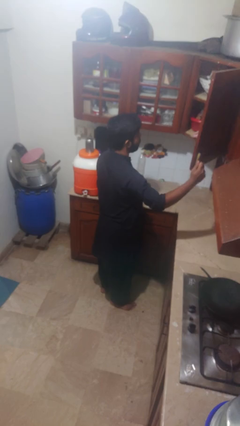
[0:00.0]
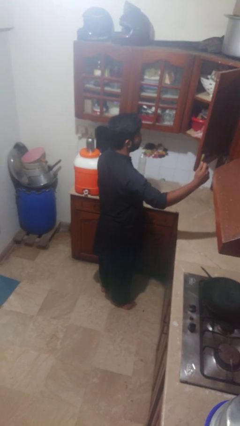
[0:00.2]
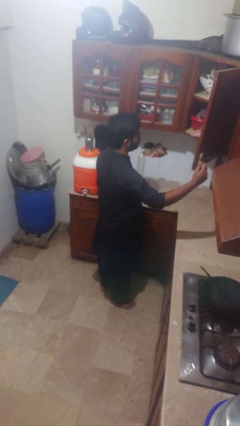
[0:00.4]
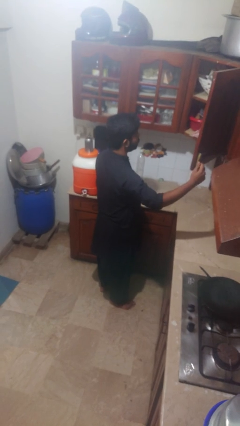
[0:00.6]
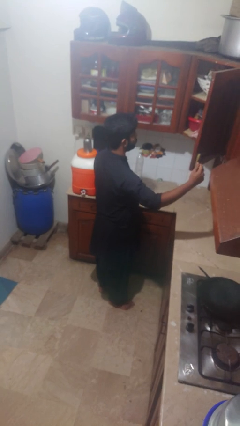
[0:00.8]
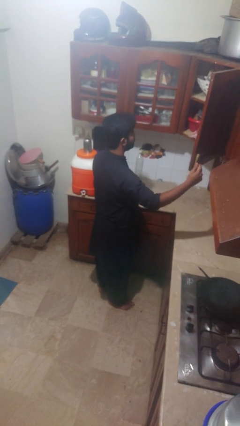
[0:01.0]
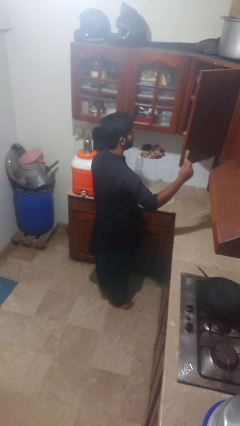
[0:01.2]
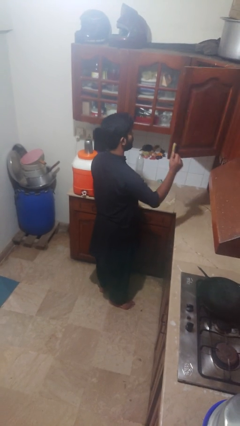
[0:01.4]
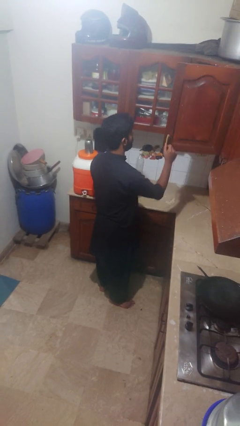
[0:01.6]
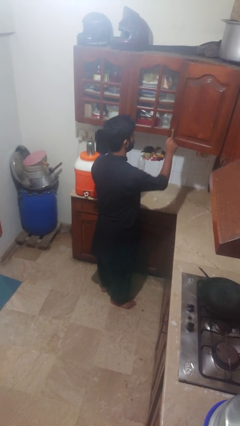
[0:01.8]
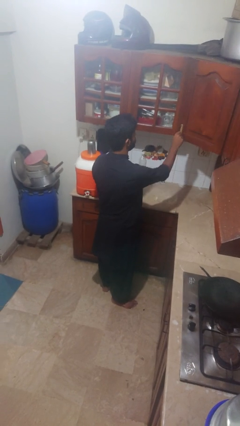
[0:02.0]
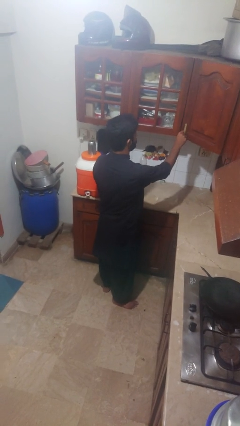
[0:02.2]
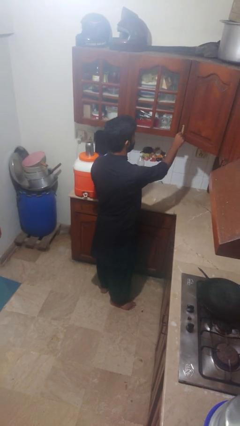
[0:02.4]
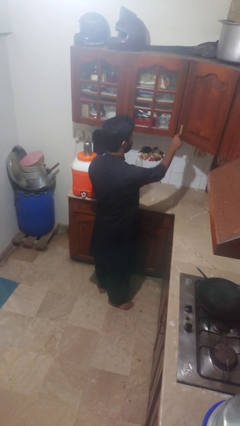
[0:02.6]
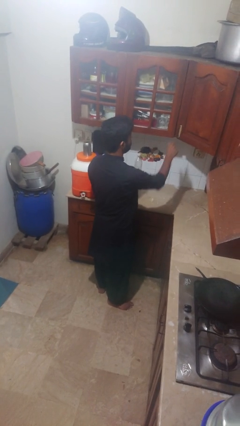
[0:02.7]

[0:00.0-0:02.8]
person closes cabinet

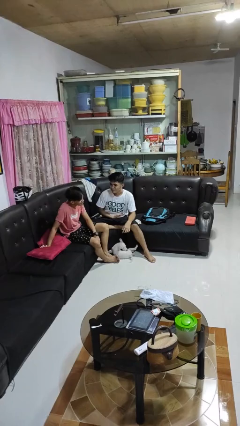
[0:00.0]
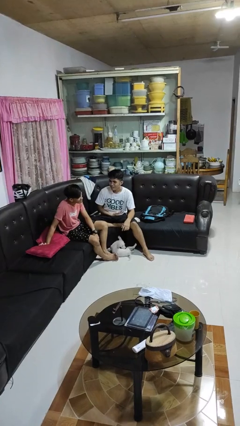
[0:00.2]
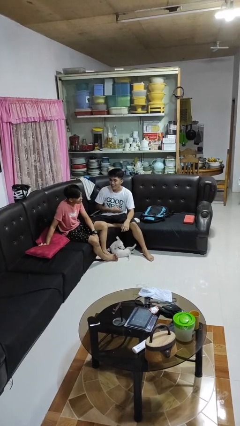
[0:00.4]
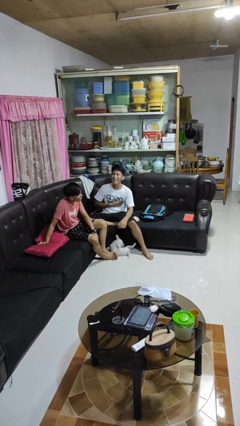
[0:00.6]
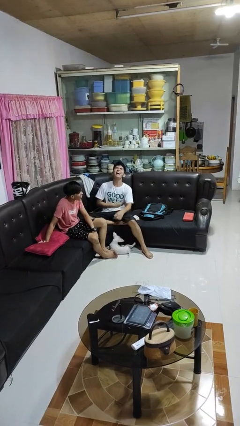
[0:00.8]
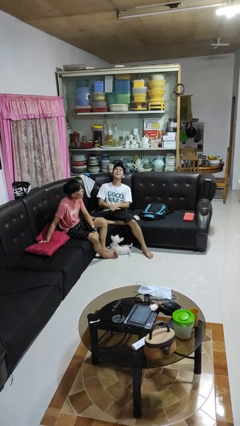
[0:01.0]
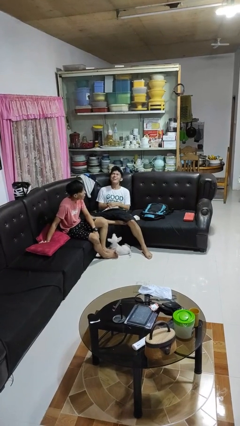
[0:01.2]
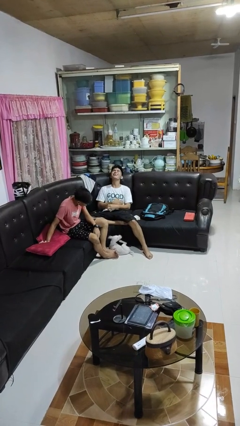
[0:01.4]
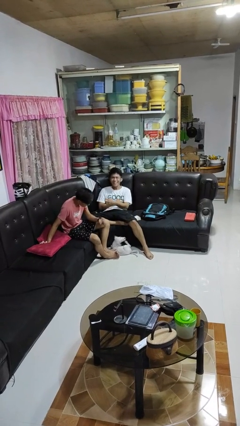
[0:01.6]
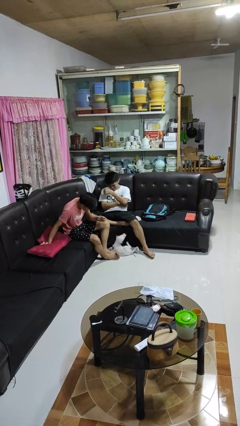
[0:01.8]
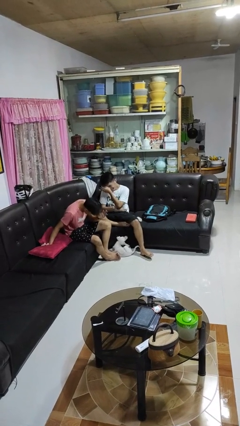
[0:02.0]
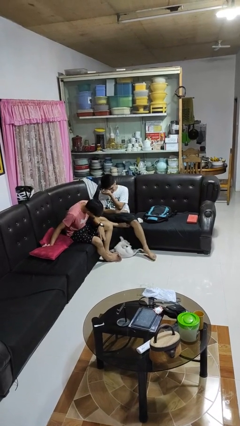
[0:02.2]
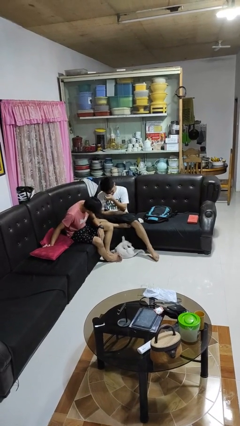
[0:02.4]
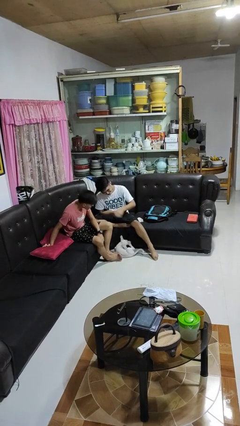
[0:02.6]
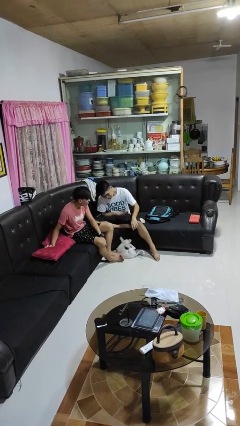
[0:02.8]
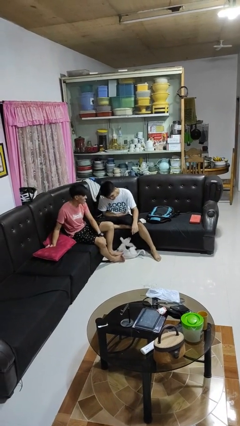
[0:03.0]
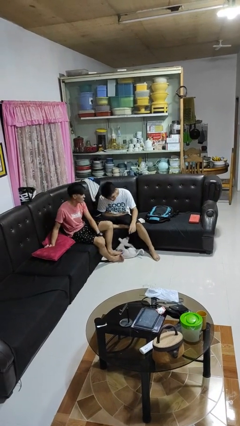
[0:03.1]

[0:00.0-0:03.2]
person laughs with person

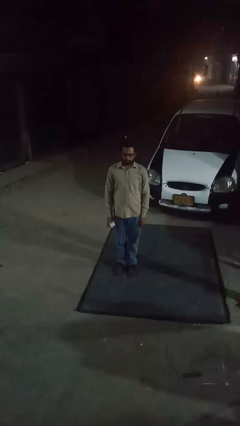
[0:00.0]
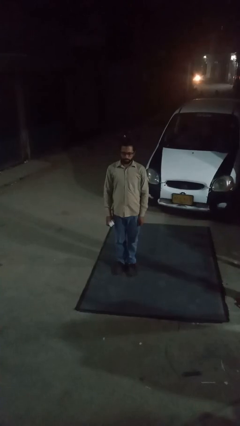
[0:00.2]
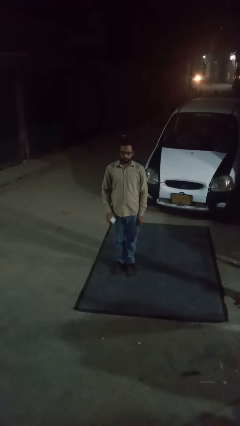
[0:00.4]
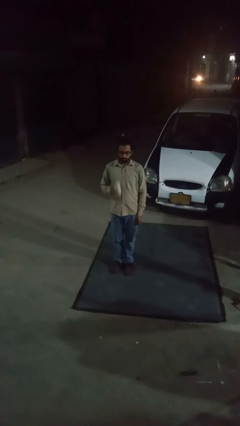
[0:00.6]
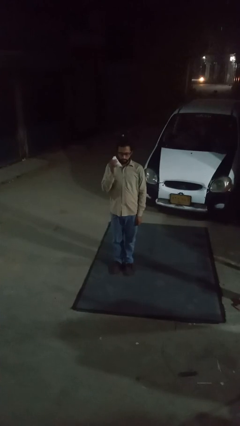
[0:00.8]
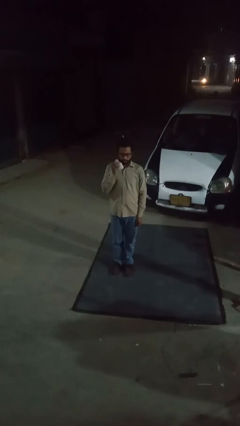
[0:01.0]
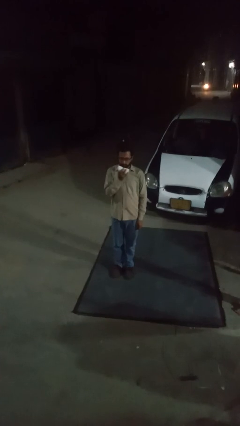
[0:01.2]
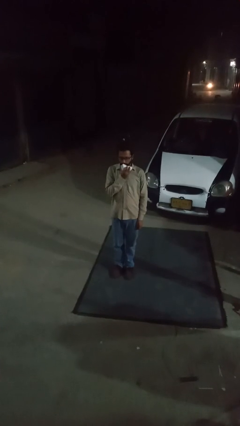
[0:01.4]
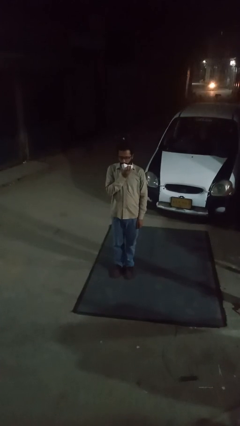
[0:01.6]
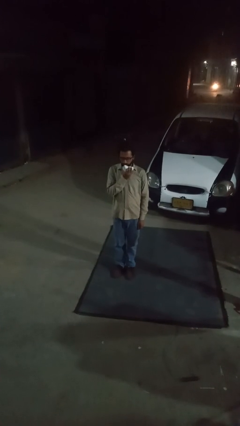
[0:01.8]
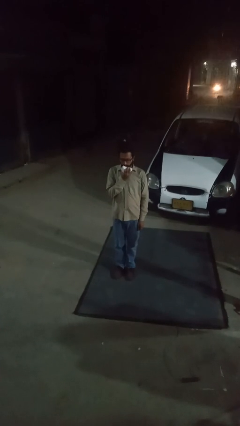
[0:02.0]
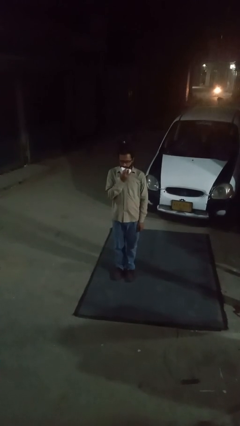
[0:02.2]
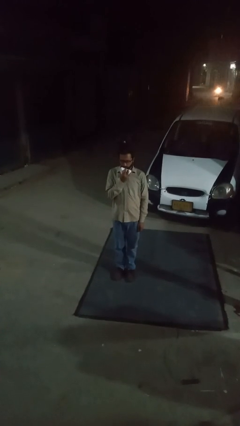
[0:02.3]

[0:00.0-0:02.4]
person wipes mouth with napkin

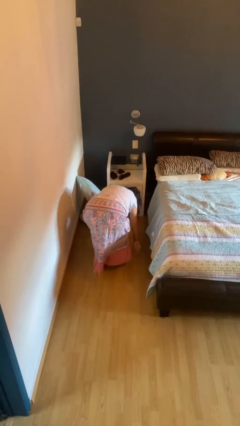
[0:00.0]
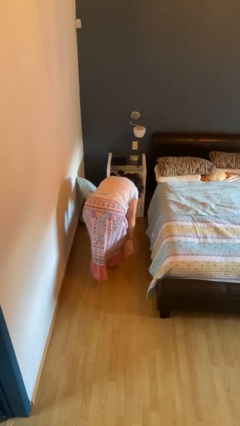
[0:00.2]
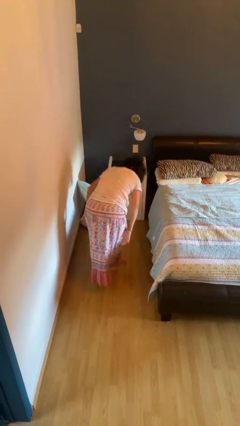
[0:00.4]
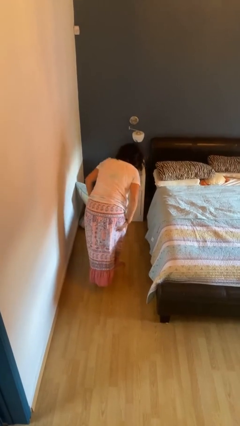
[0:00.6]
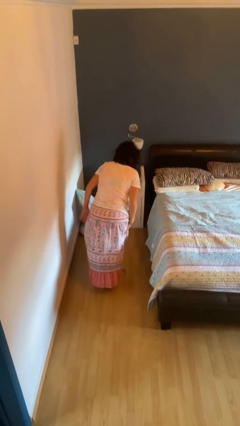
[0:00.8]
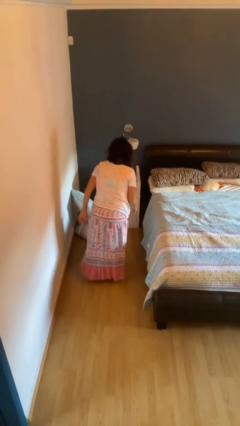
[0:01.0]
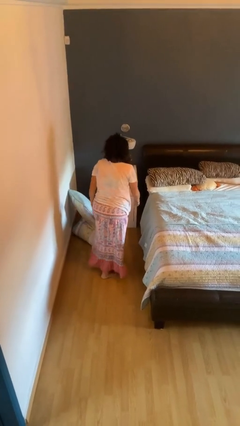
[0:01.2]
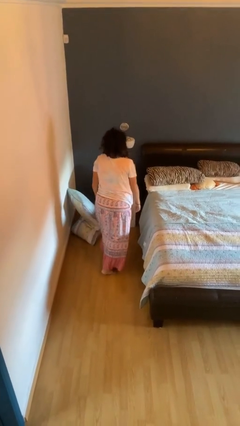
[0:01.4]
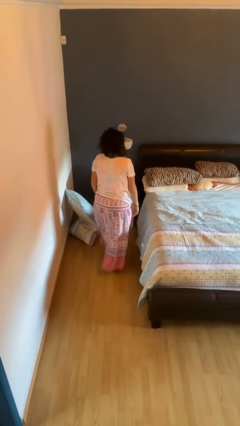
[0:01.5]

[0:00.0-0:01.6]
person stands up from floor

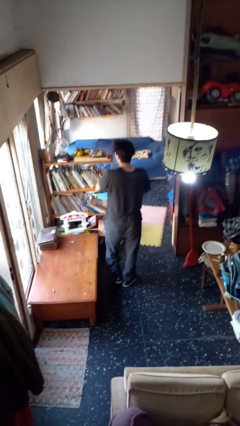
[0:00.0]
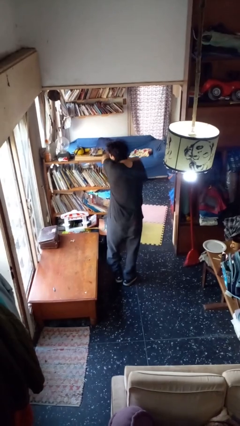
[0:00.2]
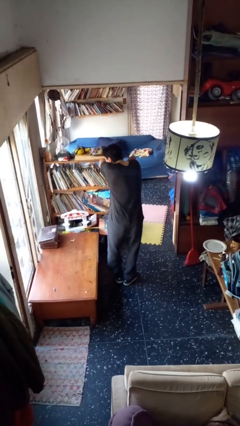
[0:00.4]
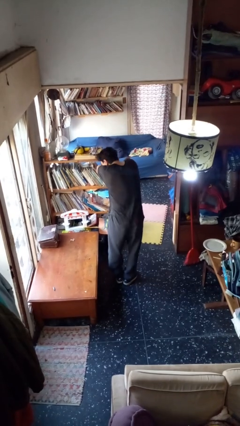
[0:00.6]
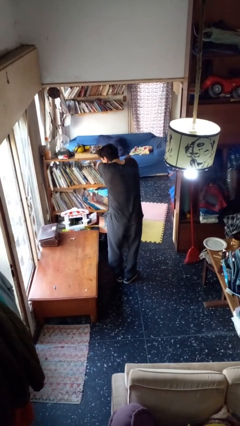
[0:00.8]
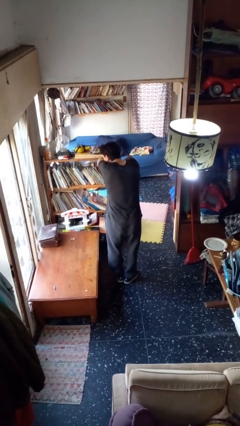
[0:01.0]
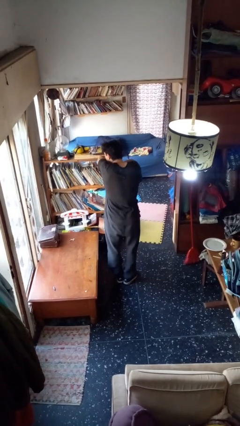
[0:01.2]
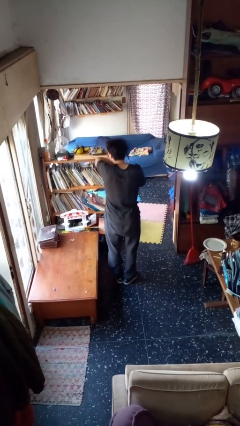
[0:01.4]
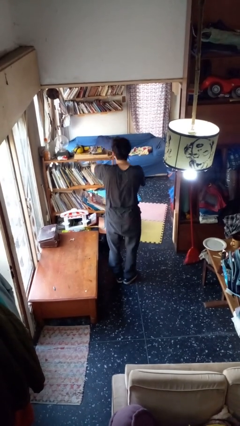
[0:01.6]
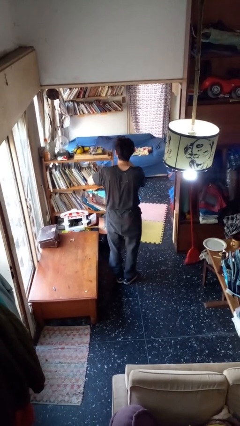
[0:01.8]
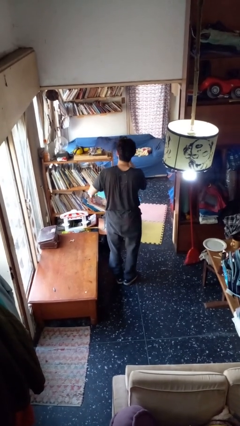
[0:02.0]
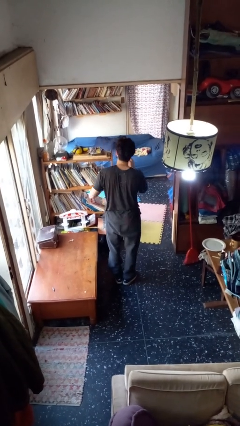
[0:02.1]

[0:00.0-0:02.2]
person sneezes into arm

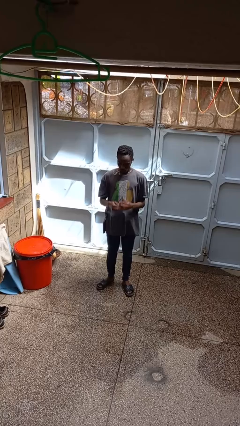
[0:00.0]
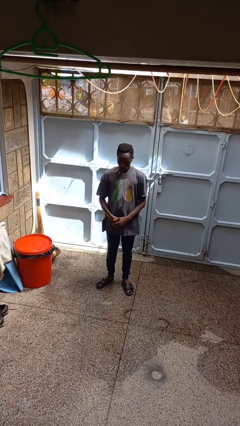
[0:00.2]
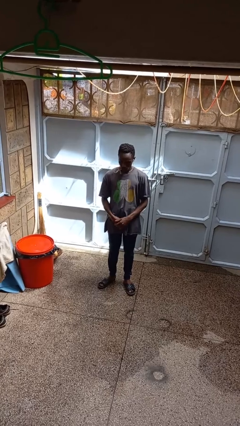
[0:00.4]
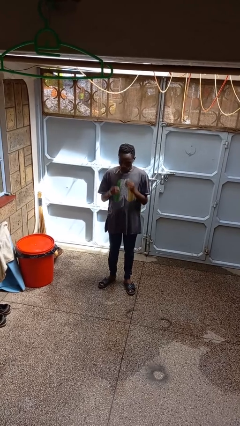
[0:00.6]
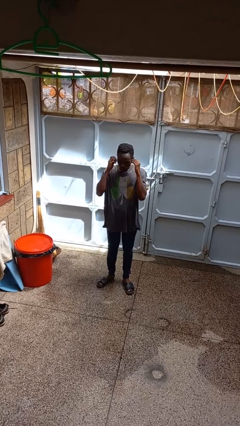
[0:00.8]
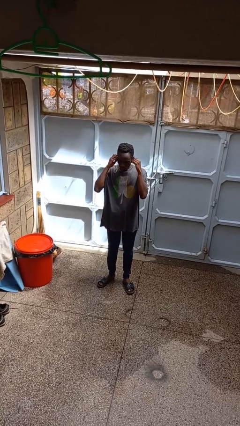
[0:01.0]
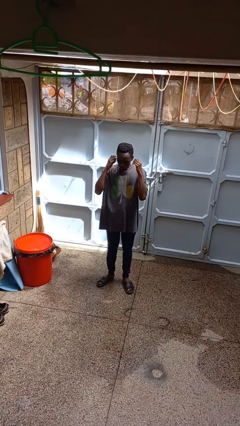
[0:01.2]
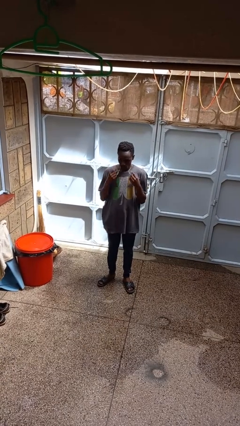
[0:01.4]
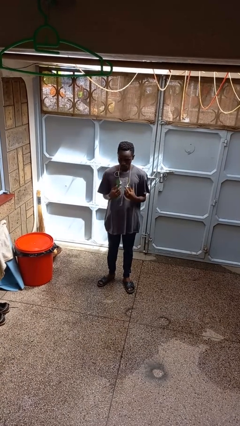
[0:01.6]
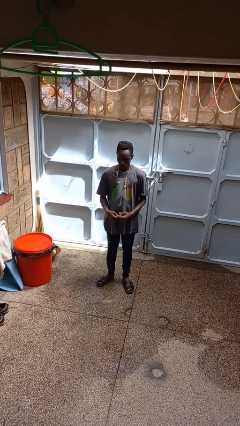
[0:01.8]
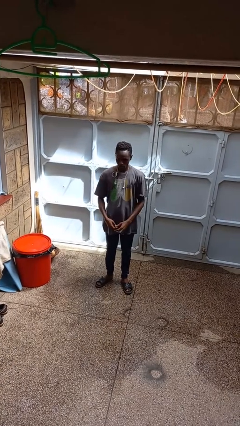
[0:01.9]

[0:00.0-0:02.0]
person takes off headphones

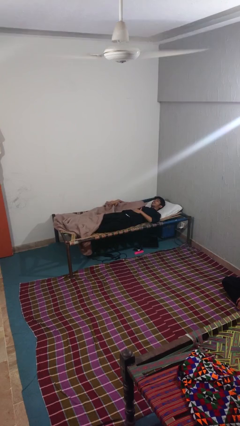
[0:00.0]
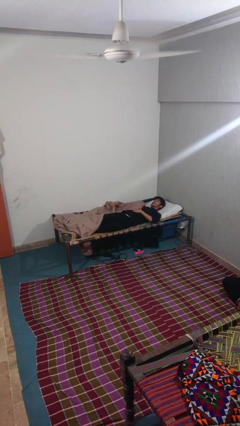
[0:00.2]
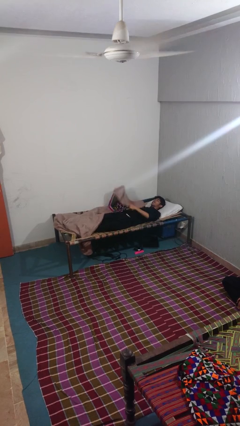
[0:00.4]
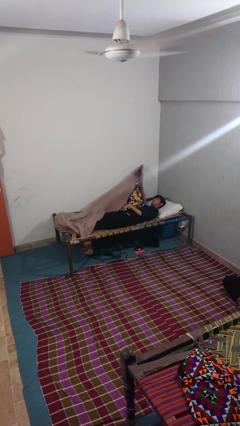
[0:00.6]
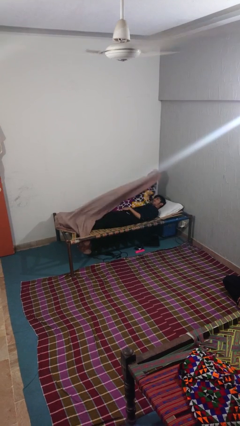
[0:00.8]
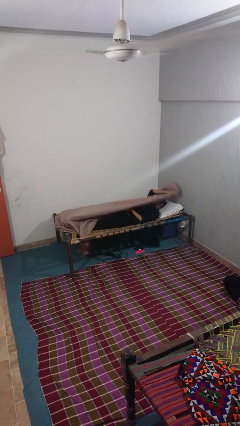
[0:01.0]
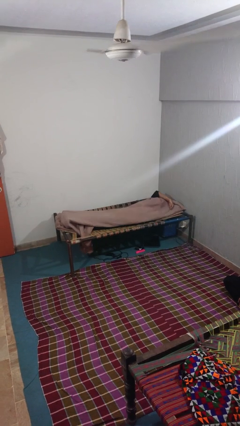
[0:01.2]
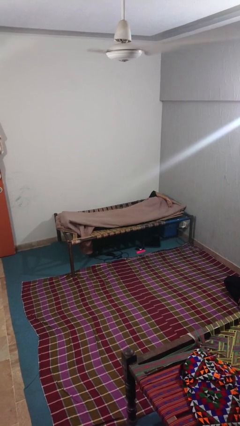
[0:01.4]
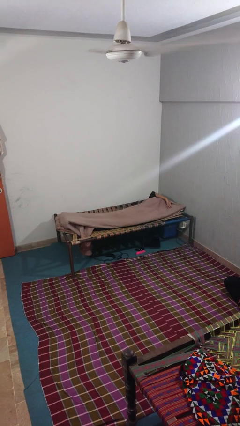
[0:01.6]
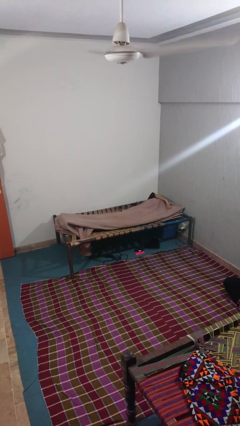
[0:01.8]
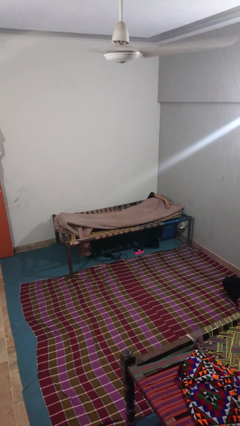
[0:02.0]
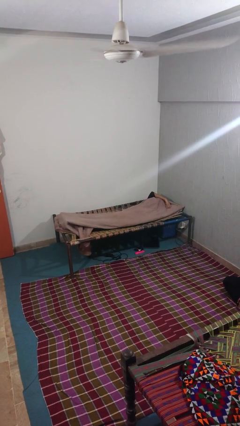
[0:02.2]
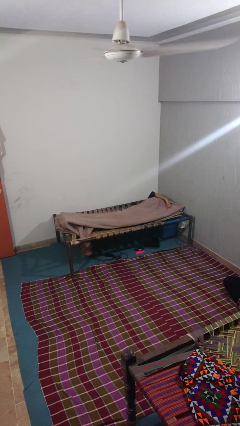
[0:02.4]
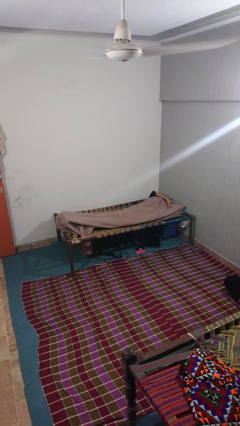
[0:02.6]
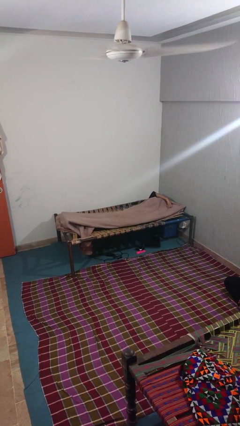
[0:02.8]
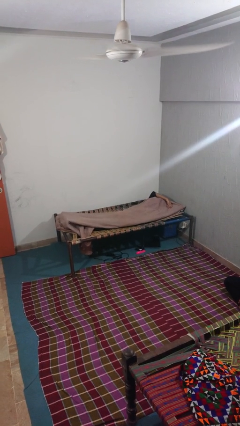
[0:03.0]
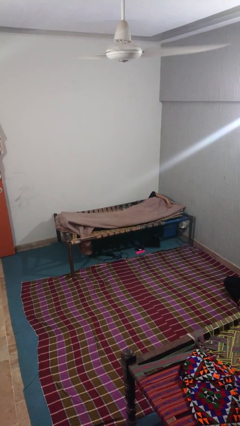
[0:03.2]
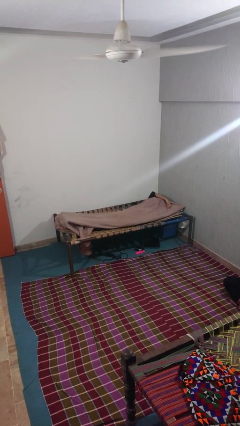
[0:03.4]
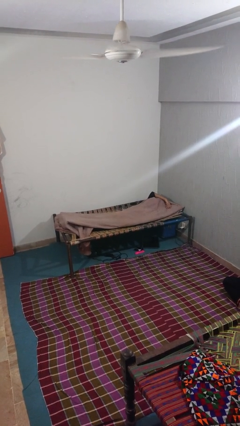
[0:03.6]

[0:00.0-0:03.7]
person covers with blanket
